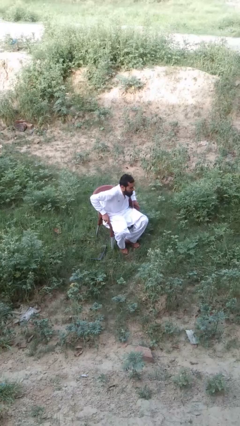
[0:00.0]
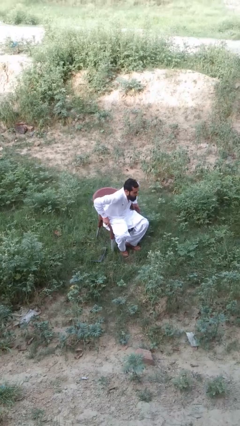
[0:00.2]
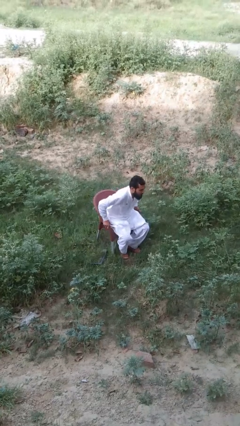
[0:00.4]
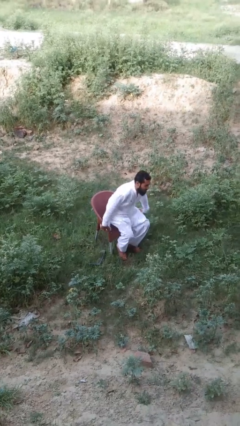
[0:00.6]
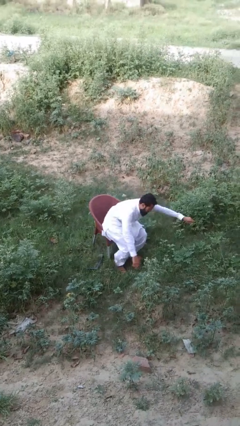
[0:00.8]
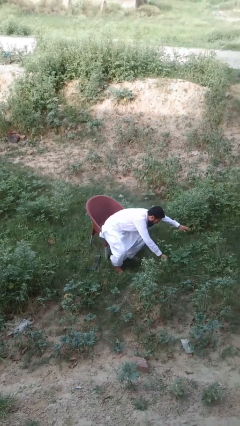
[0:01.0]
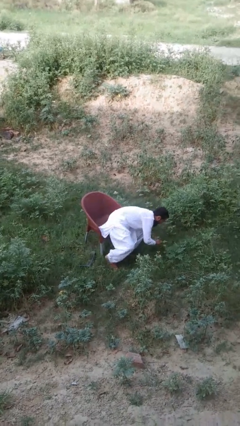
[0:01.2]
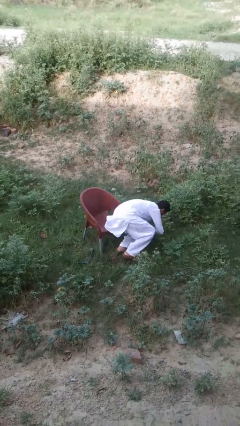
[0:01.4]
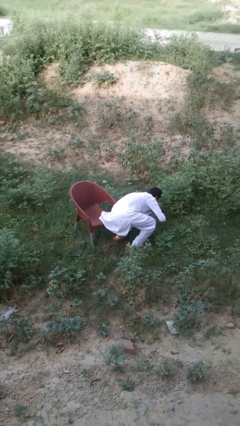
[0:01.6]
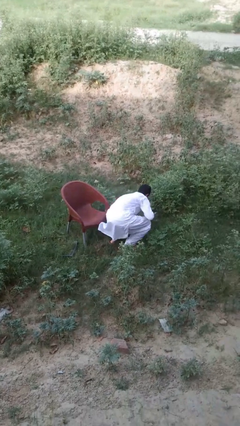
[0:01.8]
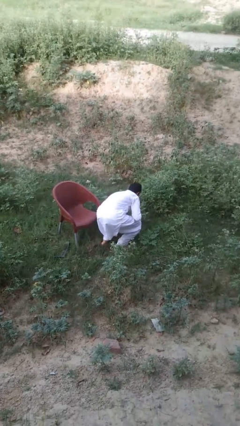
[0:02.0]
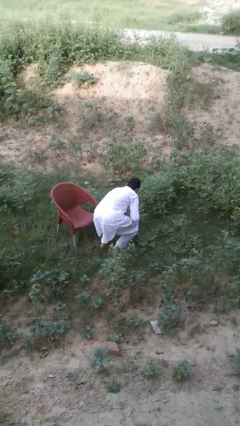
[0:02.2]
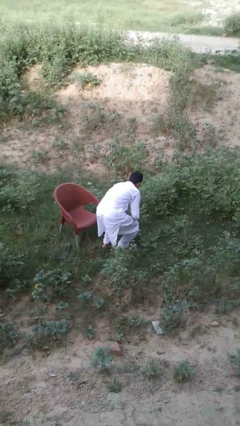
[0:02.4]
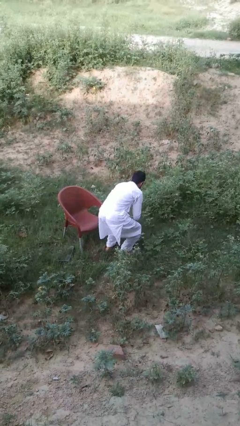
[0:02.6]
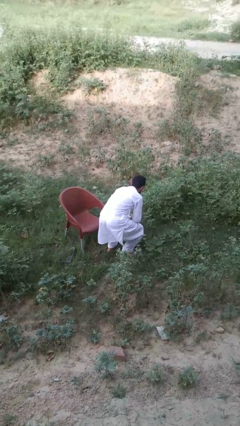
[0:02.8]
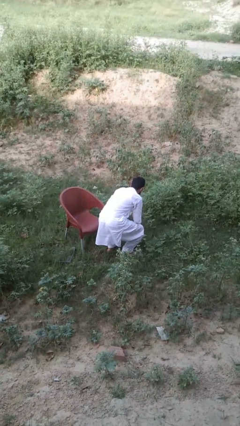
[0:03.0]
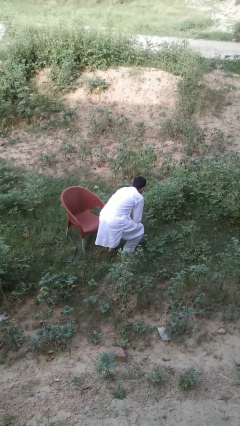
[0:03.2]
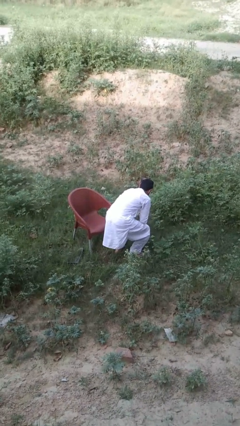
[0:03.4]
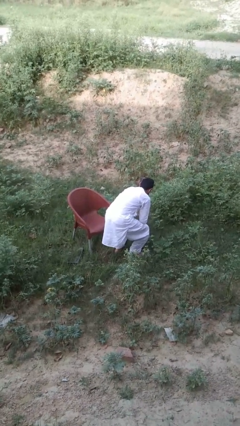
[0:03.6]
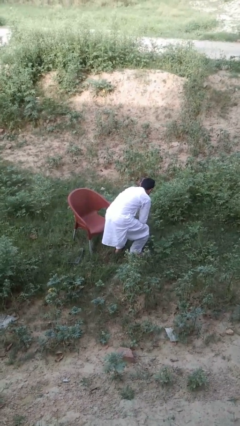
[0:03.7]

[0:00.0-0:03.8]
person falls from chair

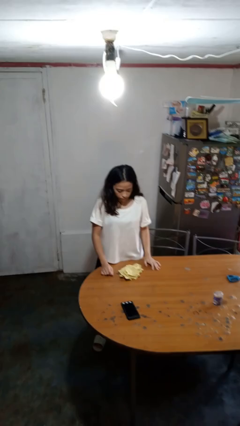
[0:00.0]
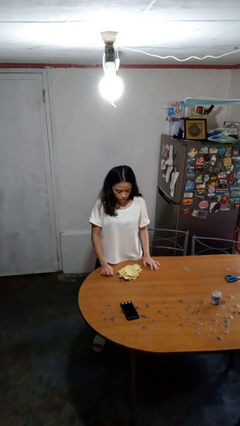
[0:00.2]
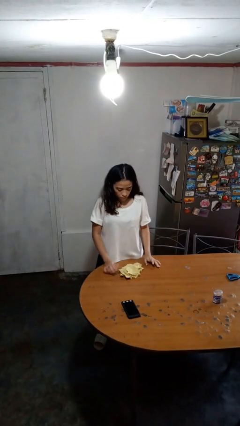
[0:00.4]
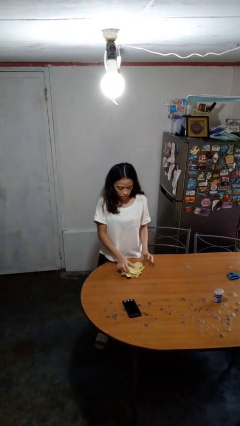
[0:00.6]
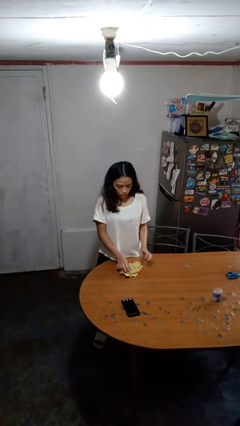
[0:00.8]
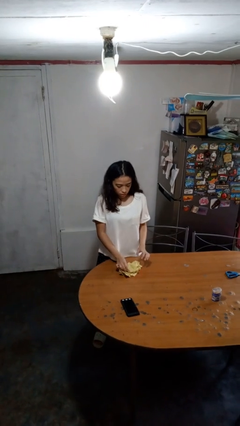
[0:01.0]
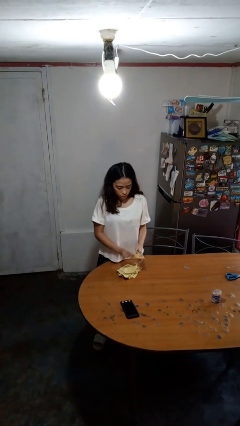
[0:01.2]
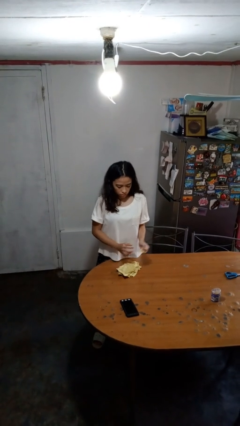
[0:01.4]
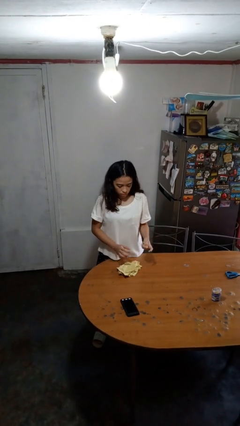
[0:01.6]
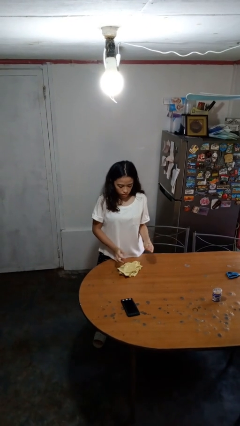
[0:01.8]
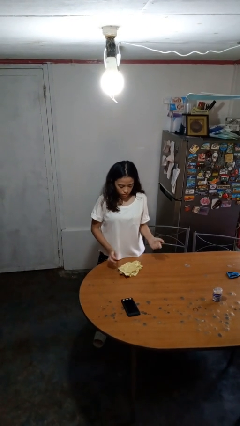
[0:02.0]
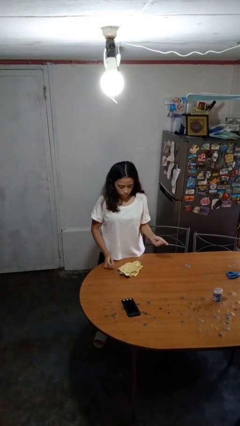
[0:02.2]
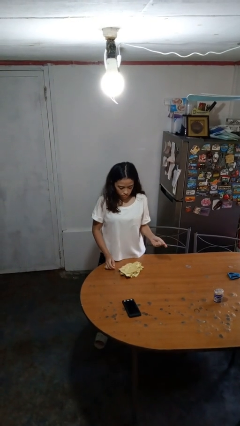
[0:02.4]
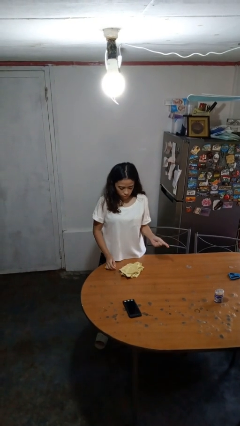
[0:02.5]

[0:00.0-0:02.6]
person crumples paper

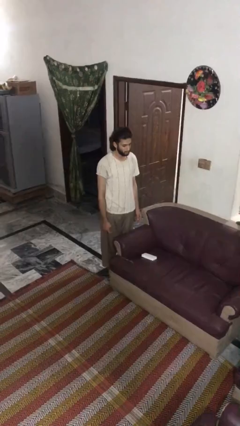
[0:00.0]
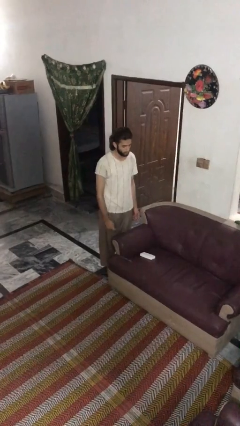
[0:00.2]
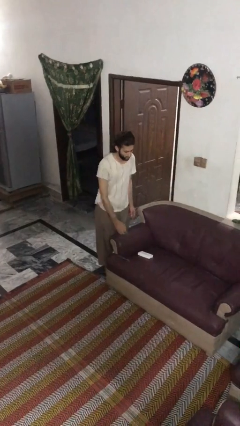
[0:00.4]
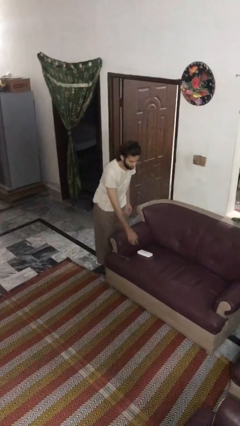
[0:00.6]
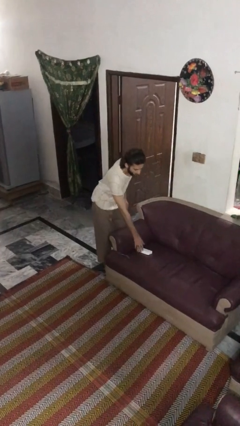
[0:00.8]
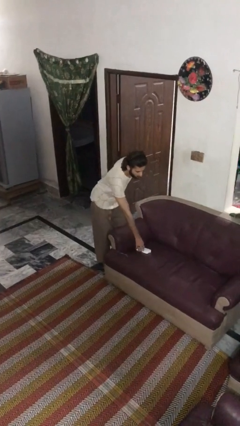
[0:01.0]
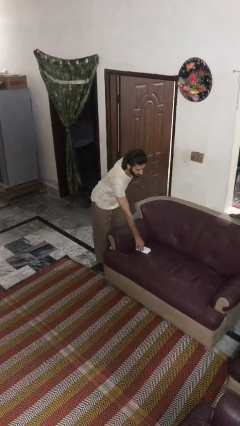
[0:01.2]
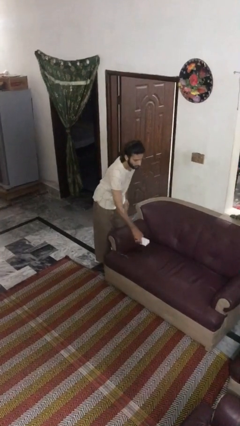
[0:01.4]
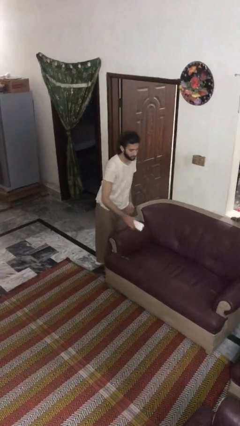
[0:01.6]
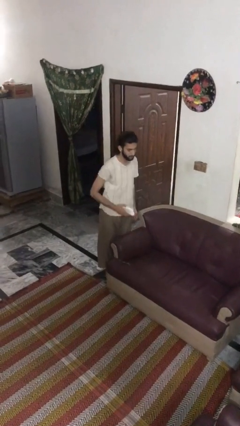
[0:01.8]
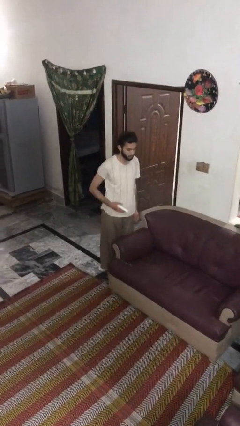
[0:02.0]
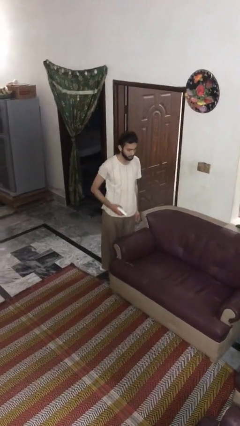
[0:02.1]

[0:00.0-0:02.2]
person picks up object from couch

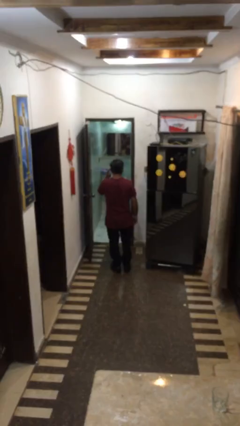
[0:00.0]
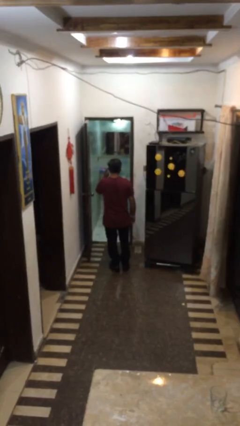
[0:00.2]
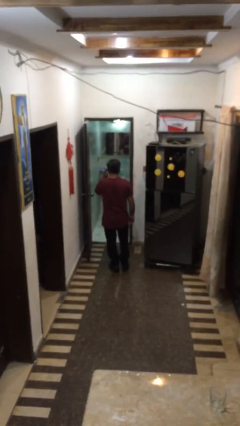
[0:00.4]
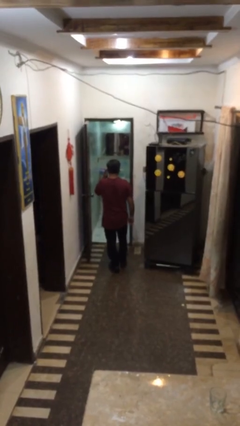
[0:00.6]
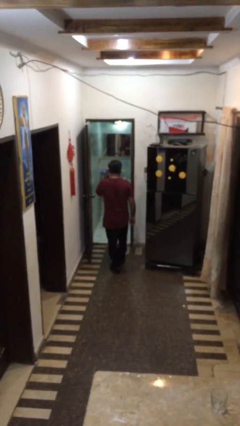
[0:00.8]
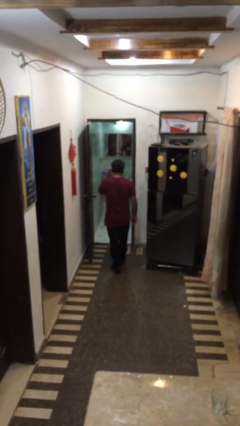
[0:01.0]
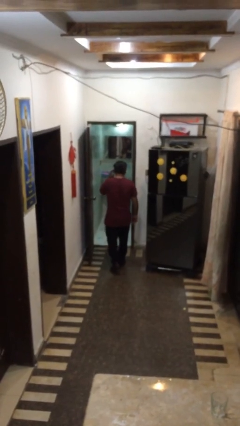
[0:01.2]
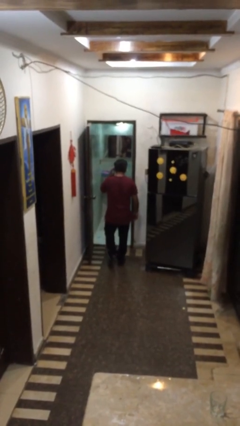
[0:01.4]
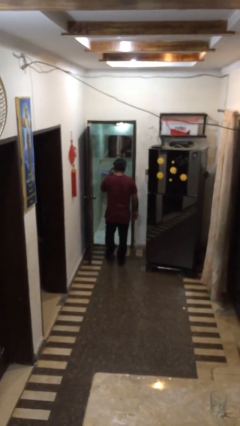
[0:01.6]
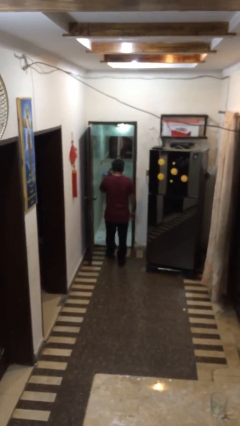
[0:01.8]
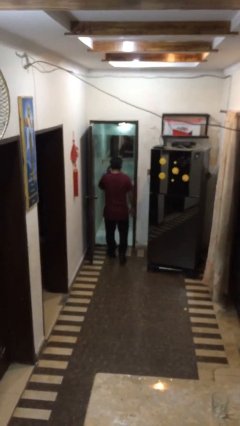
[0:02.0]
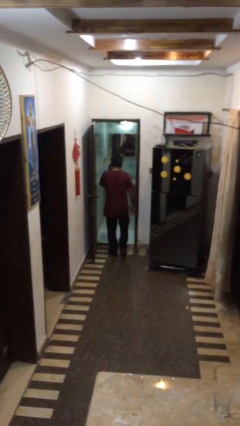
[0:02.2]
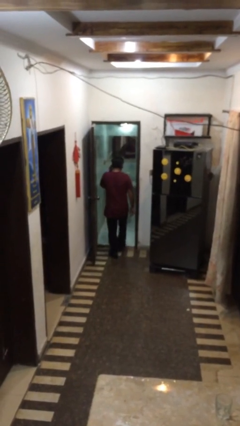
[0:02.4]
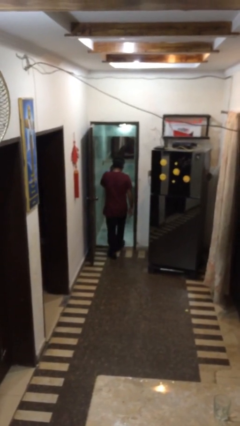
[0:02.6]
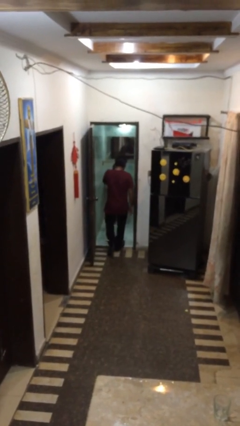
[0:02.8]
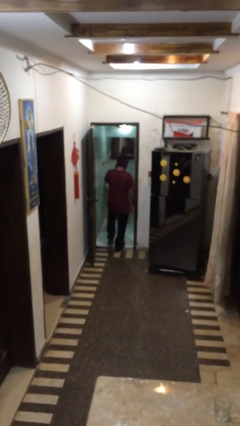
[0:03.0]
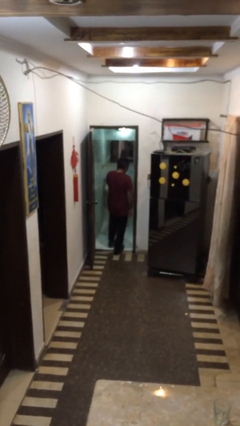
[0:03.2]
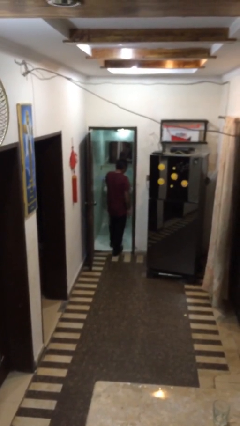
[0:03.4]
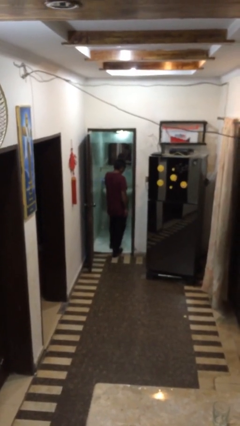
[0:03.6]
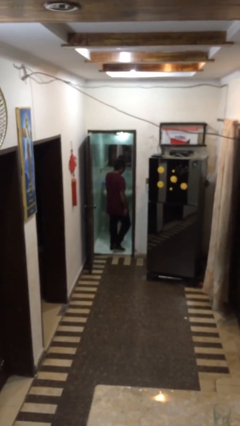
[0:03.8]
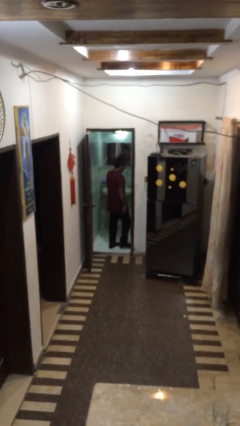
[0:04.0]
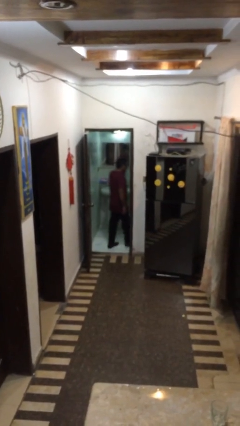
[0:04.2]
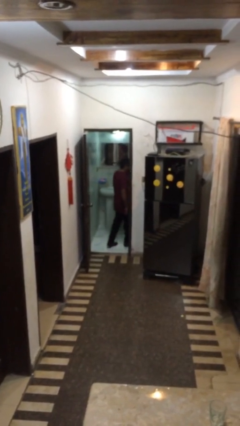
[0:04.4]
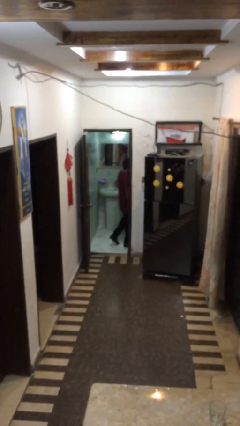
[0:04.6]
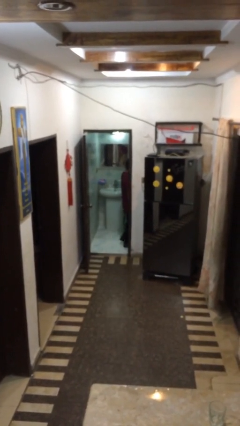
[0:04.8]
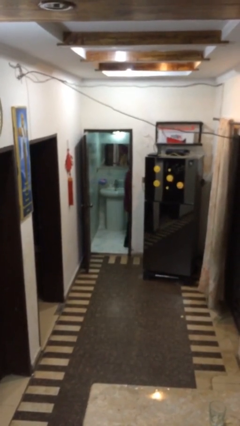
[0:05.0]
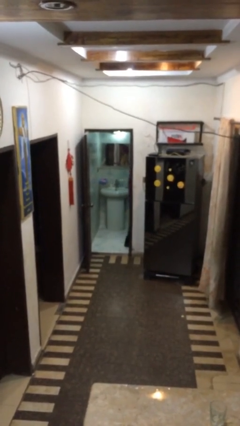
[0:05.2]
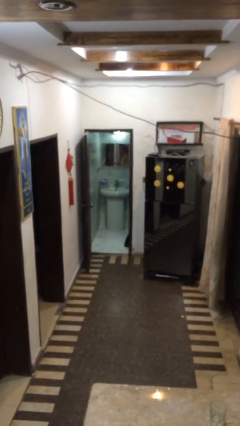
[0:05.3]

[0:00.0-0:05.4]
person exits scene through structure

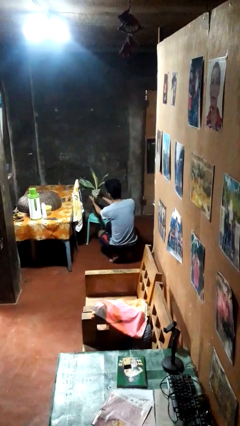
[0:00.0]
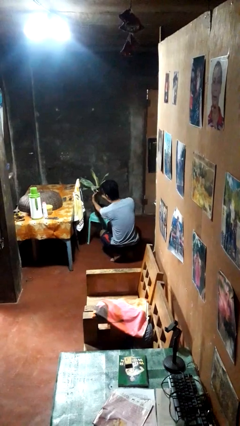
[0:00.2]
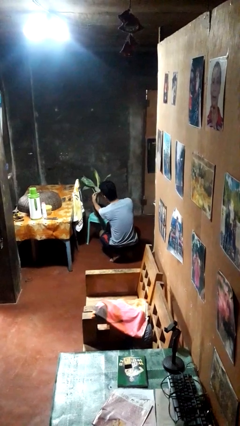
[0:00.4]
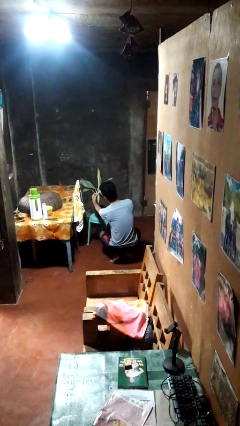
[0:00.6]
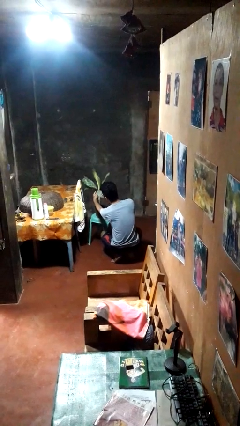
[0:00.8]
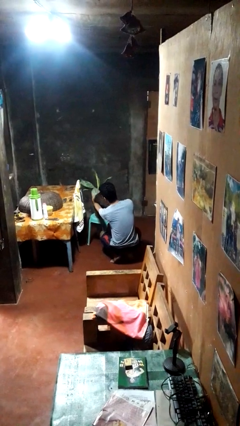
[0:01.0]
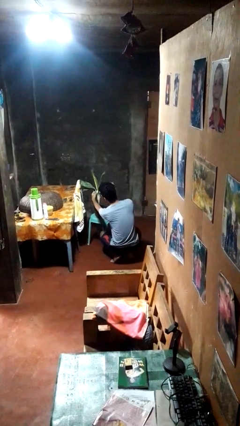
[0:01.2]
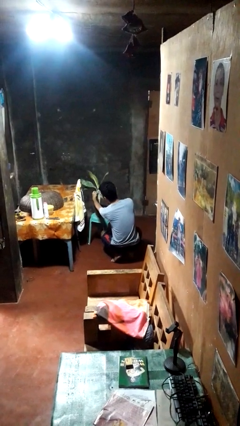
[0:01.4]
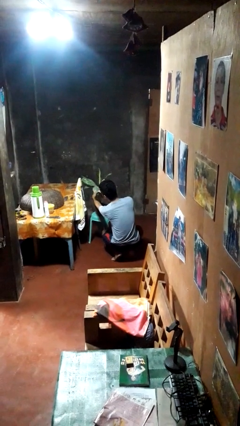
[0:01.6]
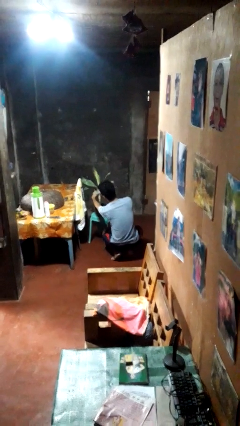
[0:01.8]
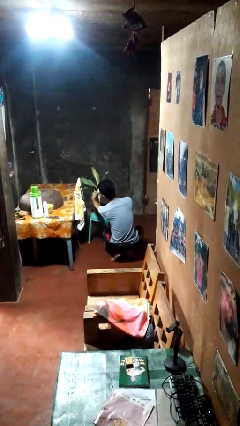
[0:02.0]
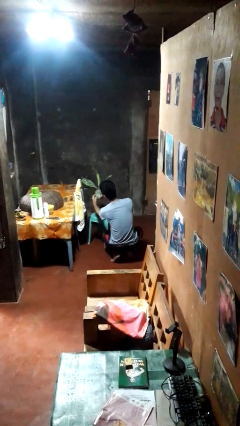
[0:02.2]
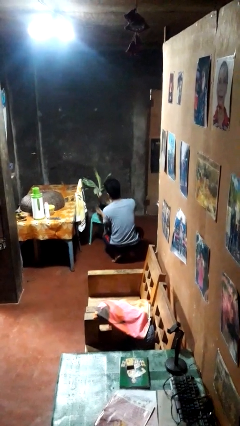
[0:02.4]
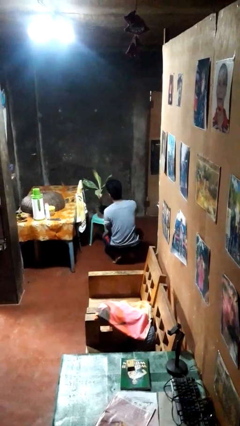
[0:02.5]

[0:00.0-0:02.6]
person arranges flowers in vase

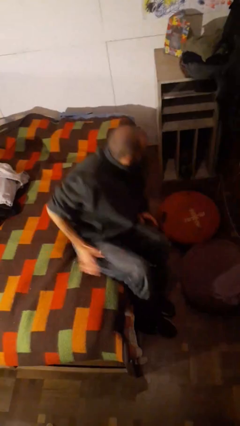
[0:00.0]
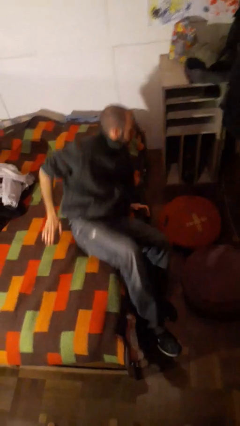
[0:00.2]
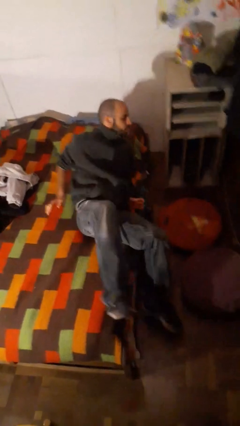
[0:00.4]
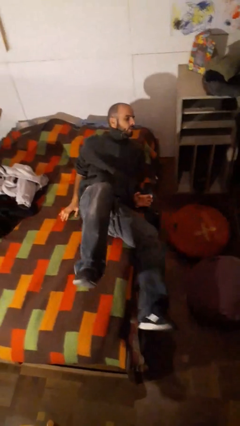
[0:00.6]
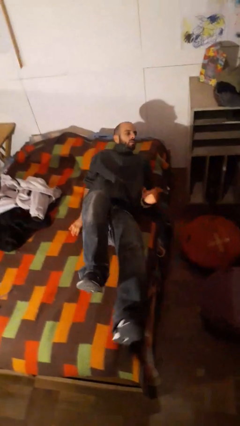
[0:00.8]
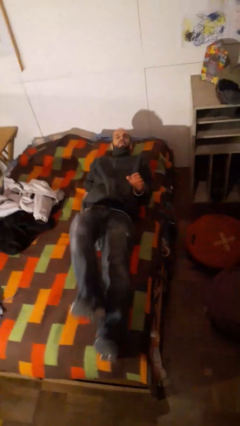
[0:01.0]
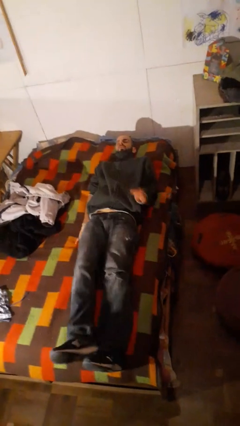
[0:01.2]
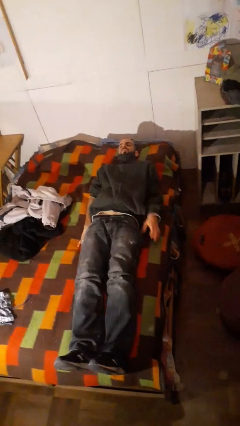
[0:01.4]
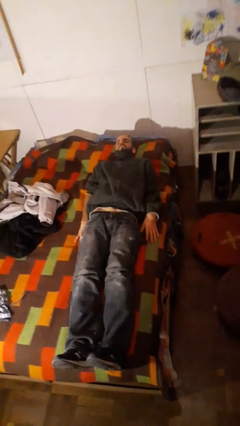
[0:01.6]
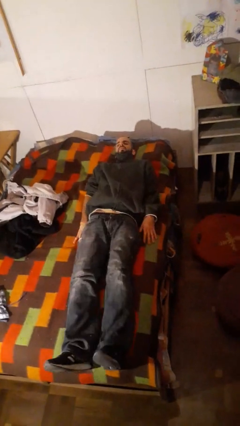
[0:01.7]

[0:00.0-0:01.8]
person lies down on bed
